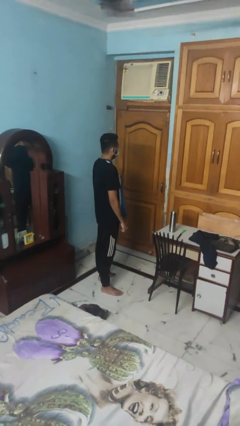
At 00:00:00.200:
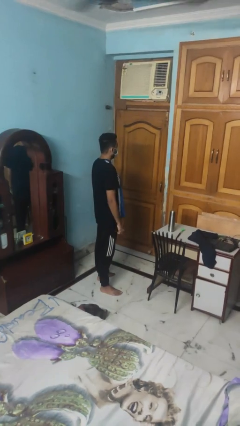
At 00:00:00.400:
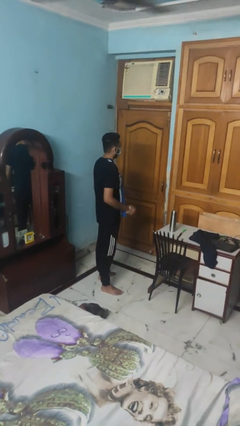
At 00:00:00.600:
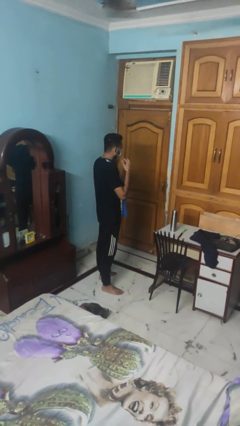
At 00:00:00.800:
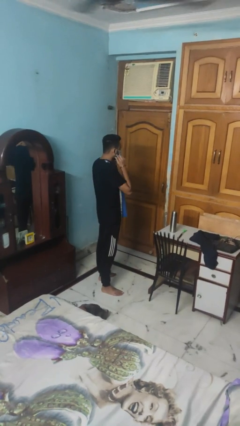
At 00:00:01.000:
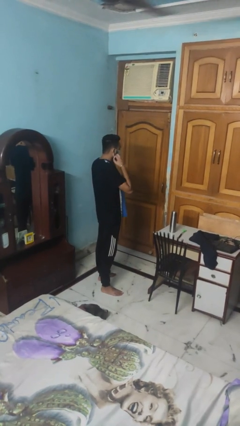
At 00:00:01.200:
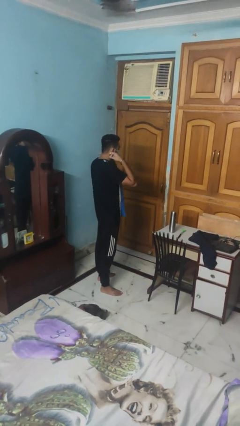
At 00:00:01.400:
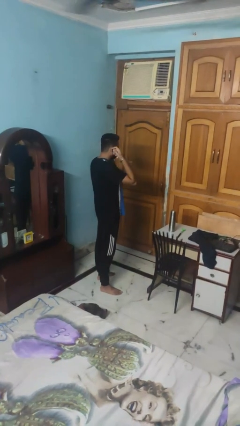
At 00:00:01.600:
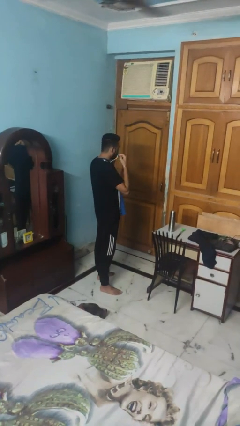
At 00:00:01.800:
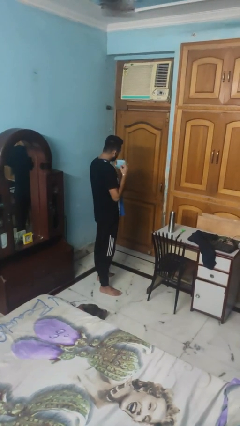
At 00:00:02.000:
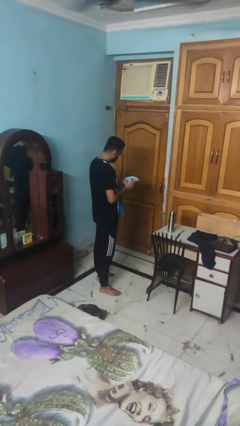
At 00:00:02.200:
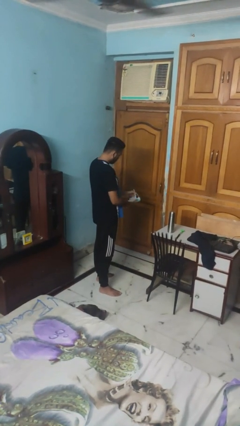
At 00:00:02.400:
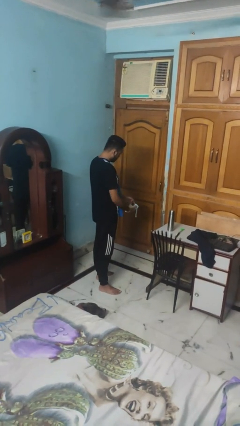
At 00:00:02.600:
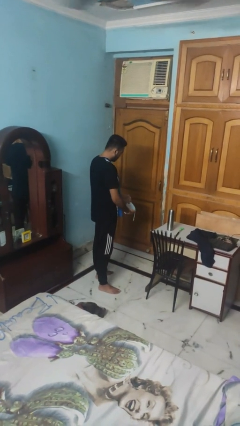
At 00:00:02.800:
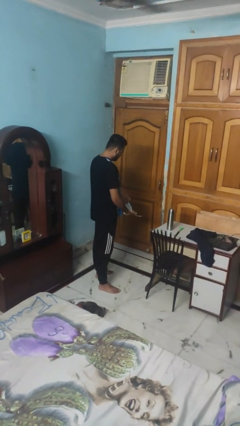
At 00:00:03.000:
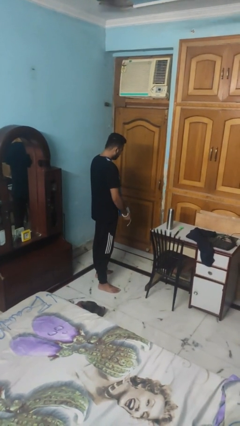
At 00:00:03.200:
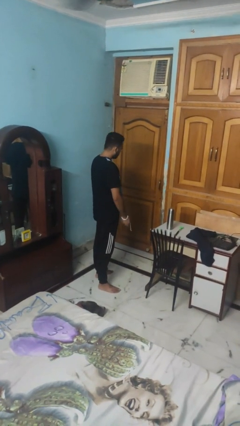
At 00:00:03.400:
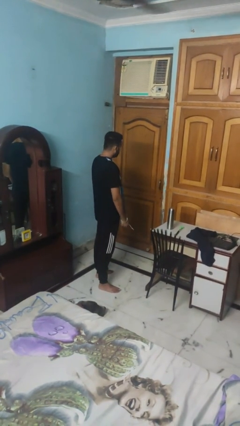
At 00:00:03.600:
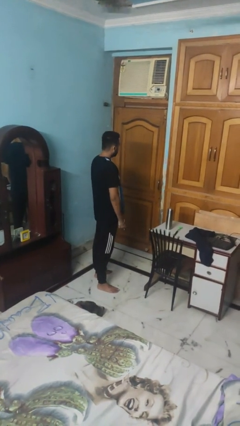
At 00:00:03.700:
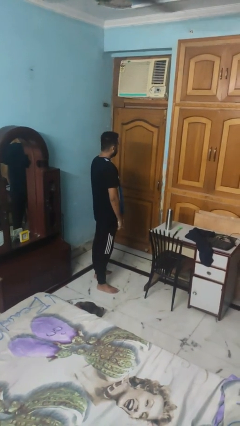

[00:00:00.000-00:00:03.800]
person takes off facemask

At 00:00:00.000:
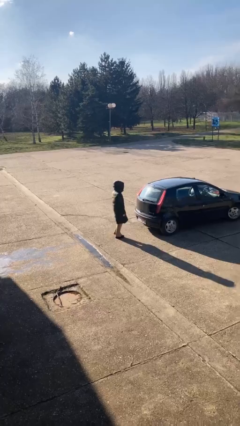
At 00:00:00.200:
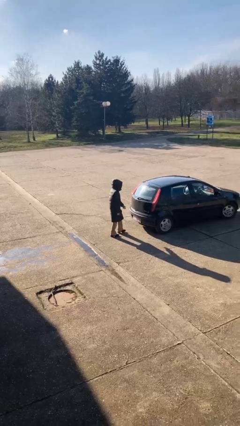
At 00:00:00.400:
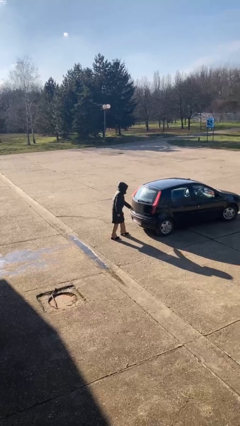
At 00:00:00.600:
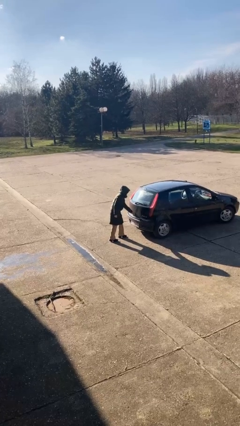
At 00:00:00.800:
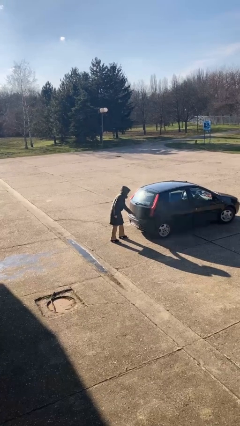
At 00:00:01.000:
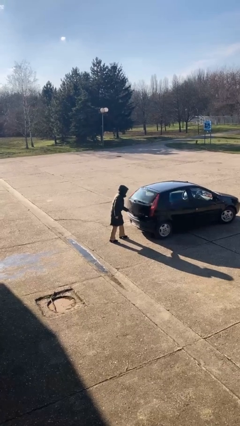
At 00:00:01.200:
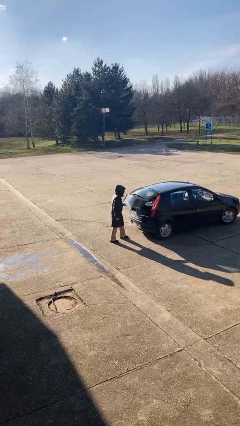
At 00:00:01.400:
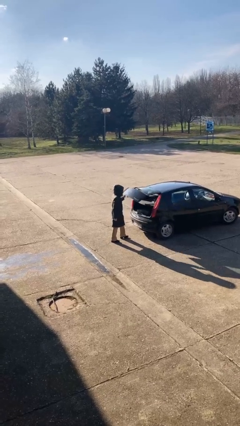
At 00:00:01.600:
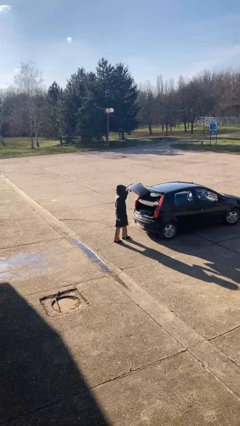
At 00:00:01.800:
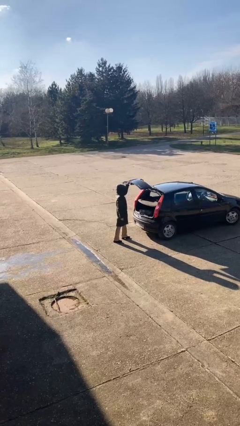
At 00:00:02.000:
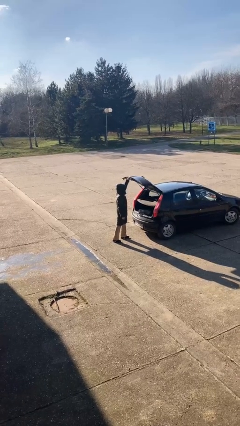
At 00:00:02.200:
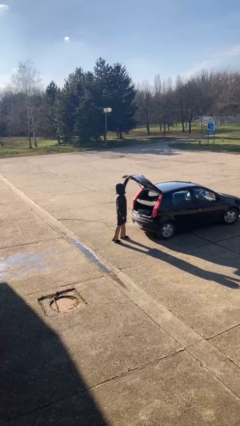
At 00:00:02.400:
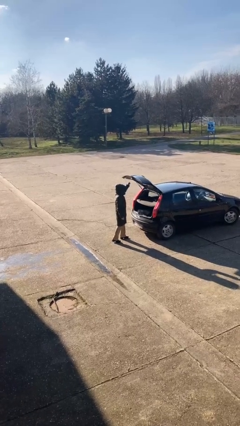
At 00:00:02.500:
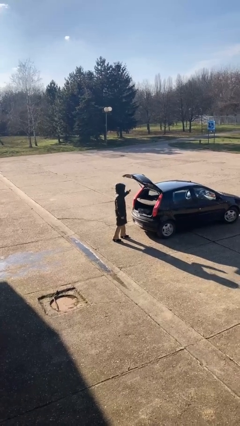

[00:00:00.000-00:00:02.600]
person opens car trunk

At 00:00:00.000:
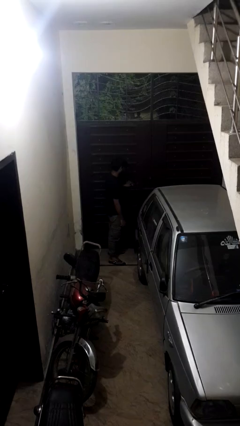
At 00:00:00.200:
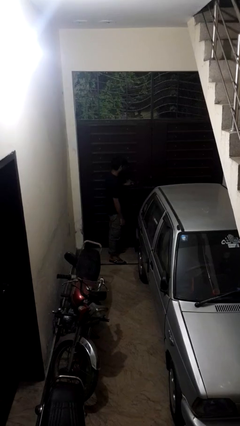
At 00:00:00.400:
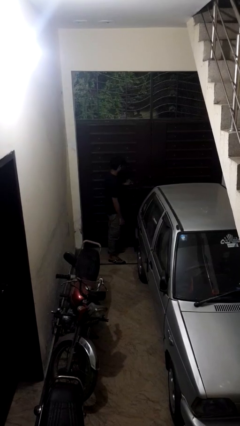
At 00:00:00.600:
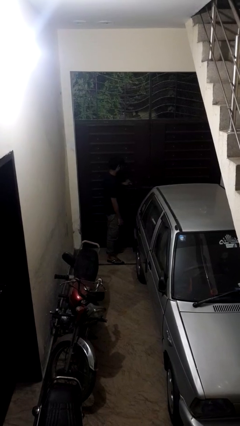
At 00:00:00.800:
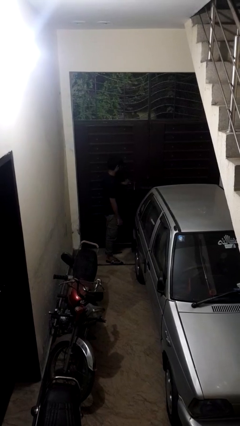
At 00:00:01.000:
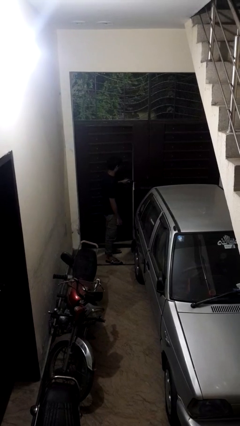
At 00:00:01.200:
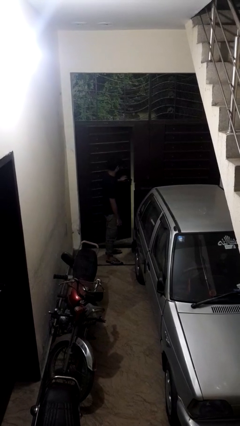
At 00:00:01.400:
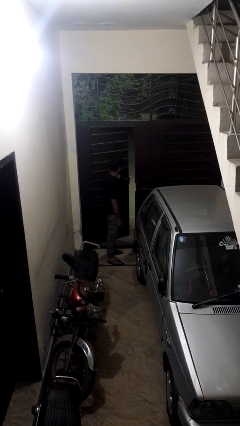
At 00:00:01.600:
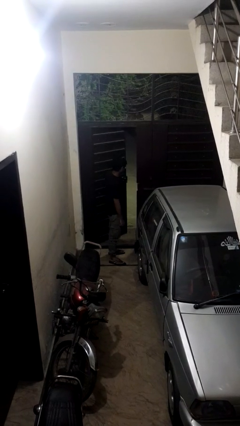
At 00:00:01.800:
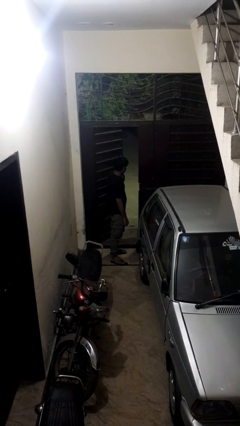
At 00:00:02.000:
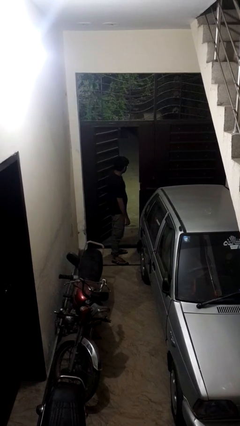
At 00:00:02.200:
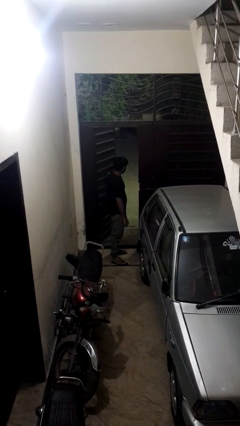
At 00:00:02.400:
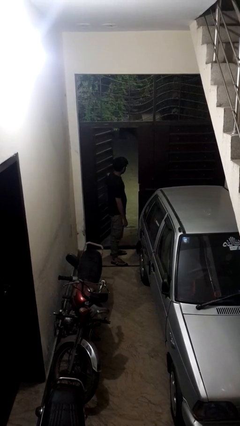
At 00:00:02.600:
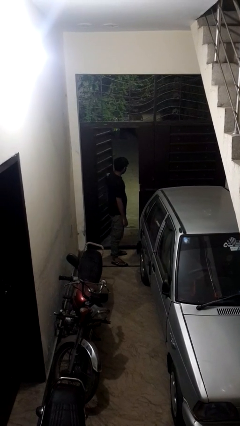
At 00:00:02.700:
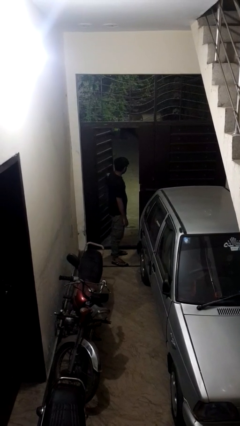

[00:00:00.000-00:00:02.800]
person opens gate

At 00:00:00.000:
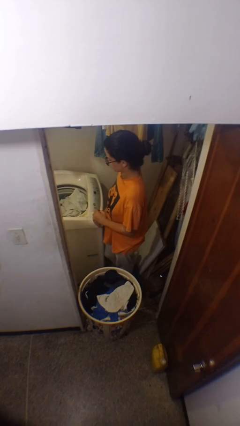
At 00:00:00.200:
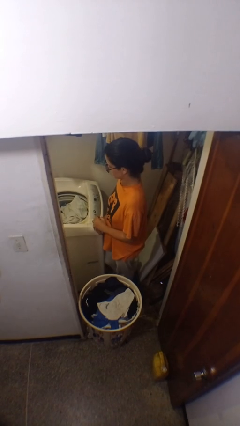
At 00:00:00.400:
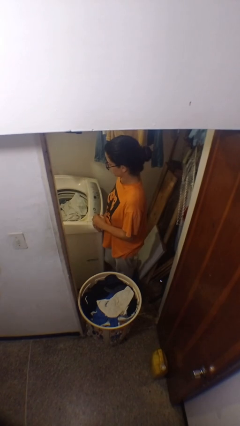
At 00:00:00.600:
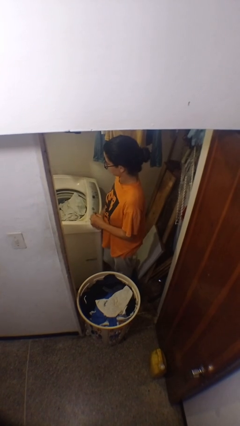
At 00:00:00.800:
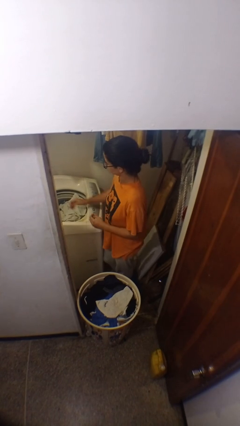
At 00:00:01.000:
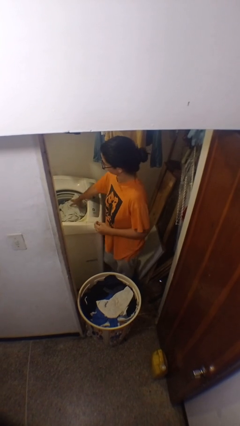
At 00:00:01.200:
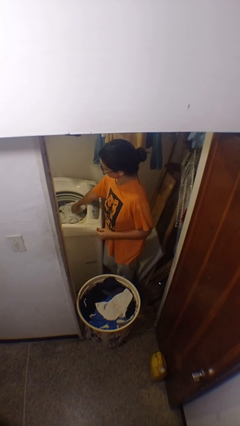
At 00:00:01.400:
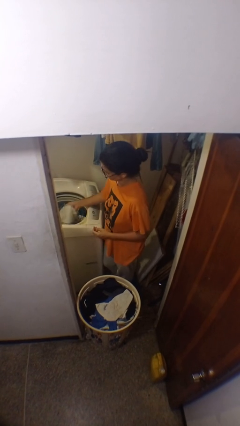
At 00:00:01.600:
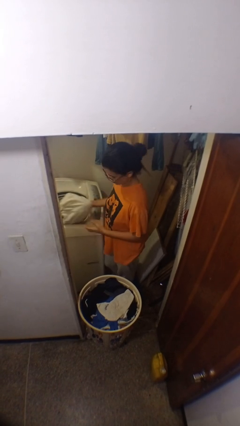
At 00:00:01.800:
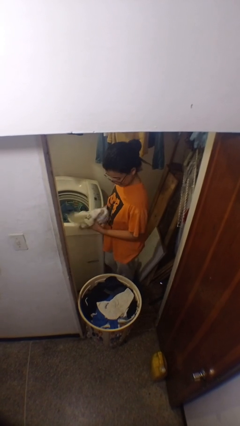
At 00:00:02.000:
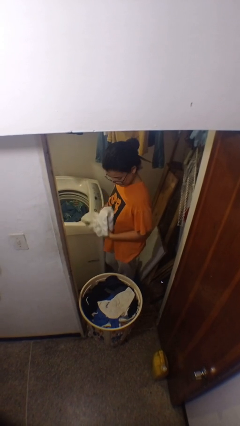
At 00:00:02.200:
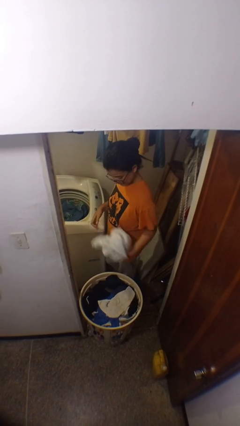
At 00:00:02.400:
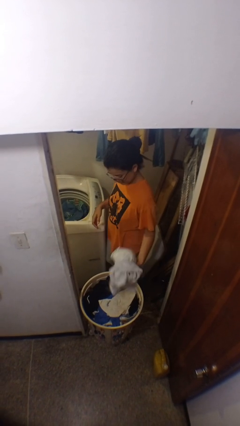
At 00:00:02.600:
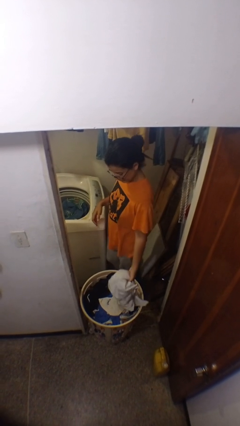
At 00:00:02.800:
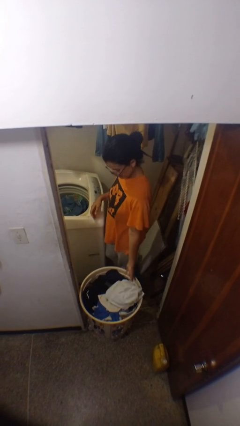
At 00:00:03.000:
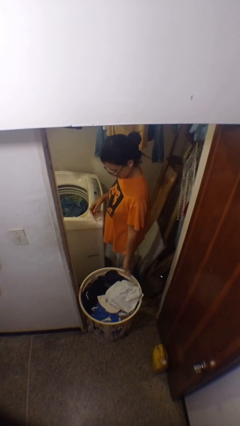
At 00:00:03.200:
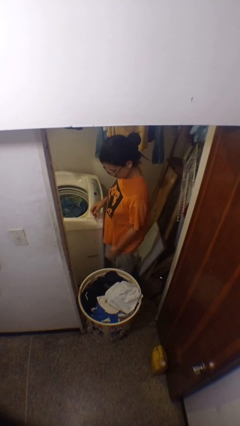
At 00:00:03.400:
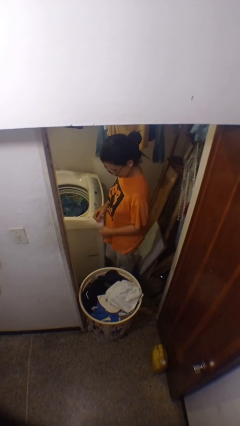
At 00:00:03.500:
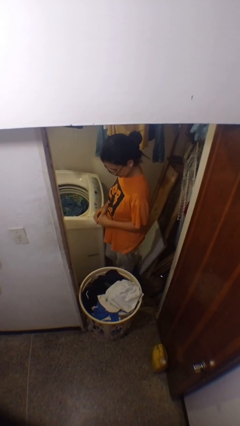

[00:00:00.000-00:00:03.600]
person unloads clotheswasher

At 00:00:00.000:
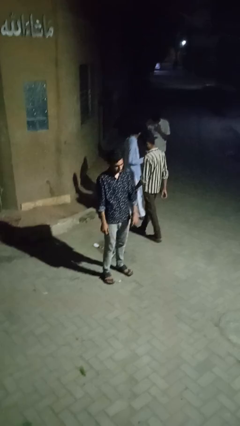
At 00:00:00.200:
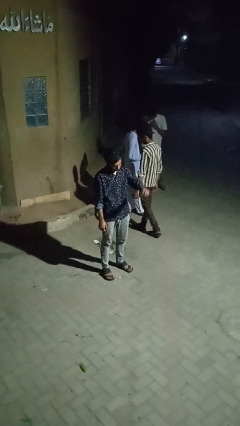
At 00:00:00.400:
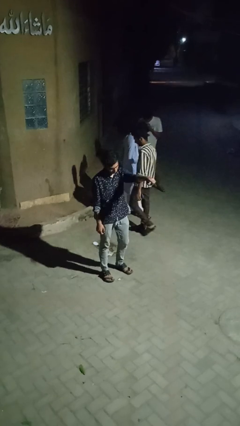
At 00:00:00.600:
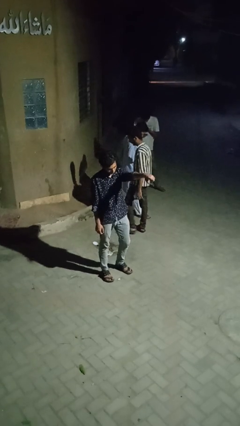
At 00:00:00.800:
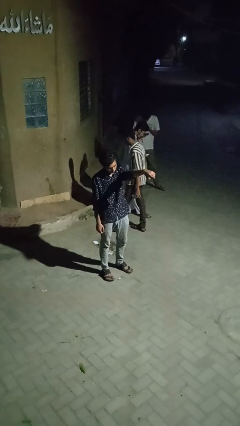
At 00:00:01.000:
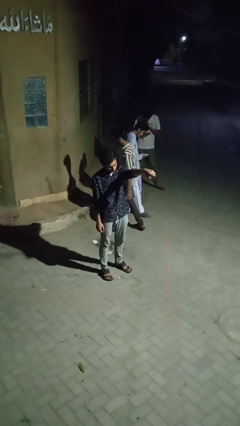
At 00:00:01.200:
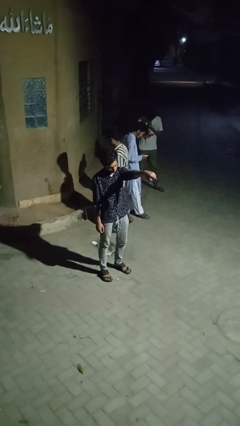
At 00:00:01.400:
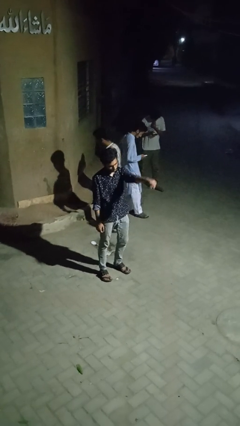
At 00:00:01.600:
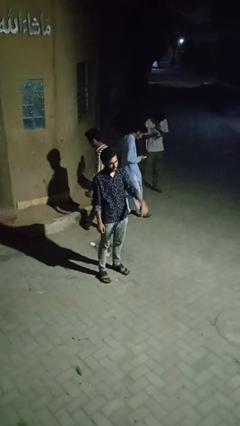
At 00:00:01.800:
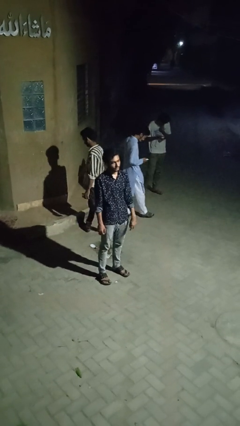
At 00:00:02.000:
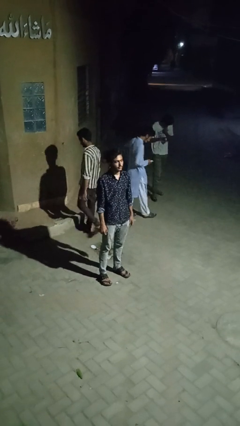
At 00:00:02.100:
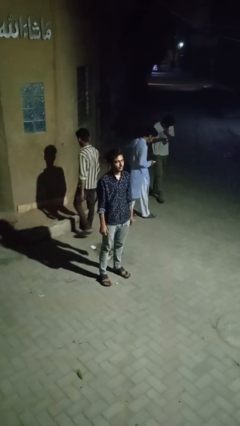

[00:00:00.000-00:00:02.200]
person points at person

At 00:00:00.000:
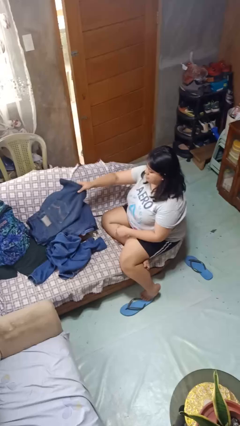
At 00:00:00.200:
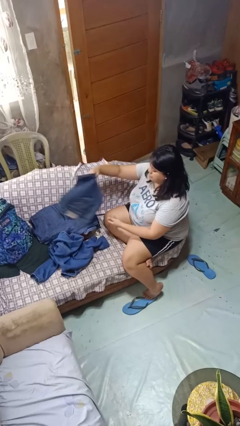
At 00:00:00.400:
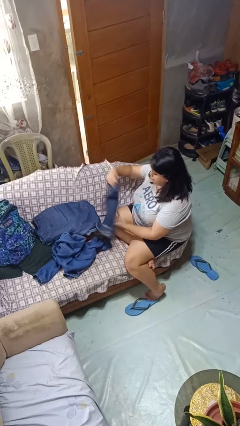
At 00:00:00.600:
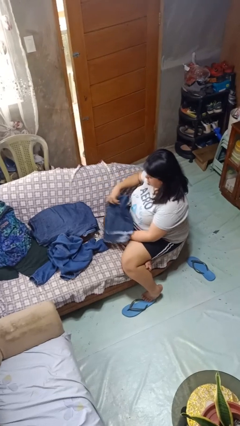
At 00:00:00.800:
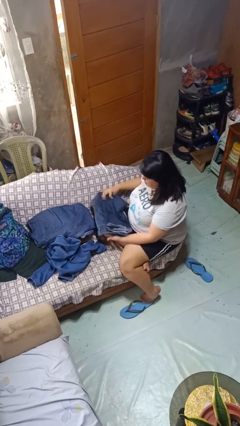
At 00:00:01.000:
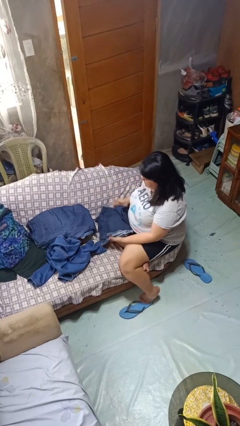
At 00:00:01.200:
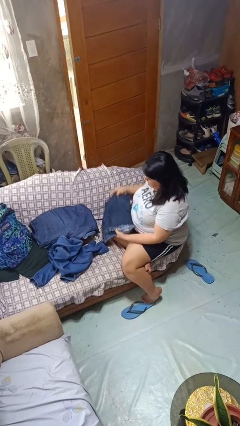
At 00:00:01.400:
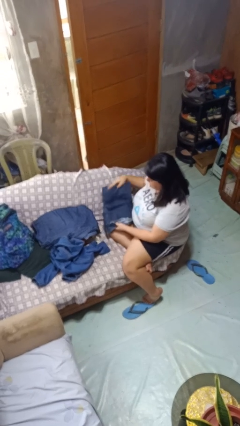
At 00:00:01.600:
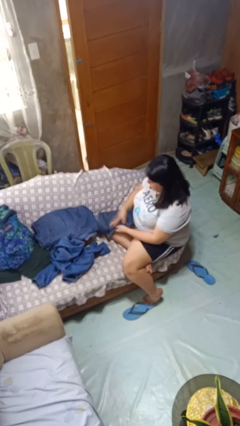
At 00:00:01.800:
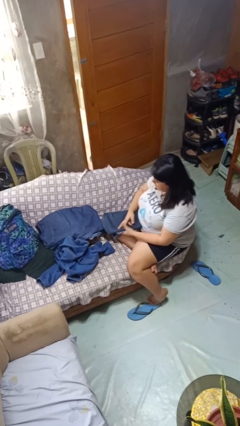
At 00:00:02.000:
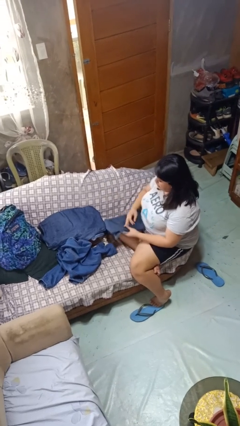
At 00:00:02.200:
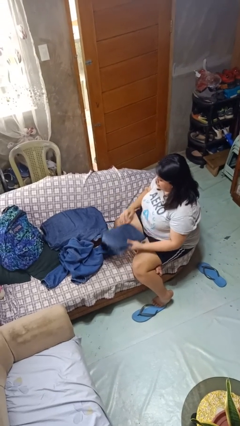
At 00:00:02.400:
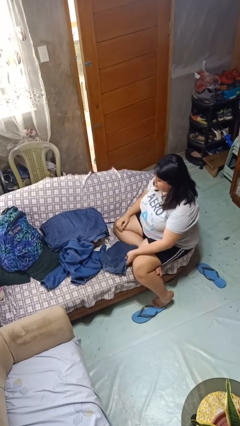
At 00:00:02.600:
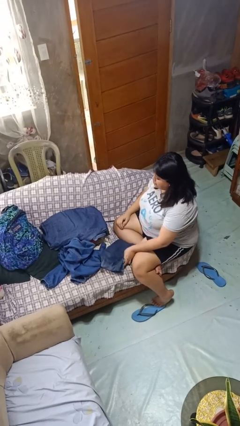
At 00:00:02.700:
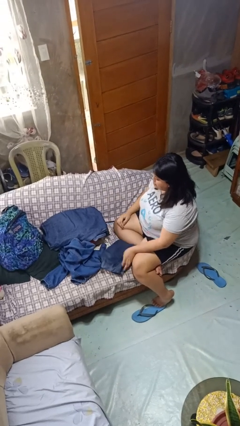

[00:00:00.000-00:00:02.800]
person folds pants
